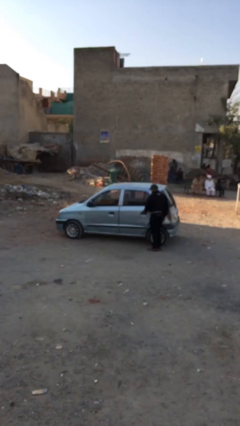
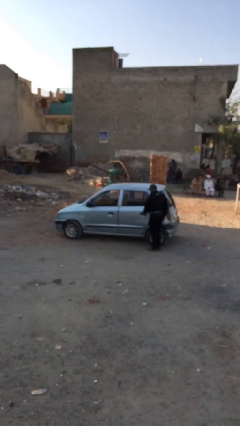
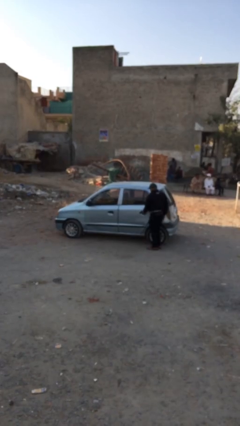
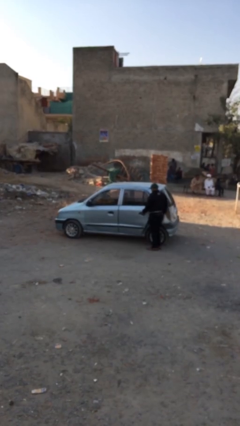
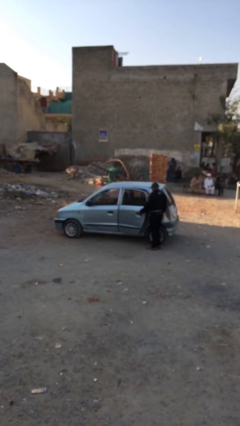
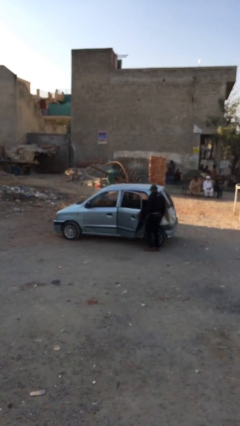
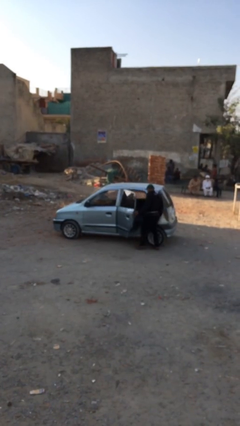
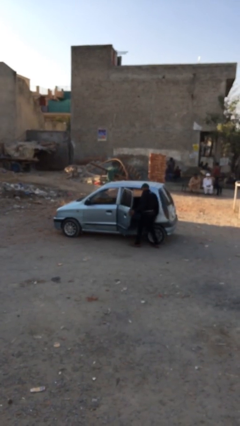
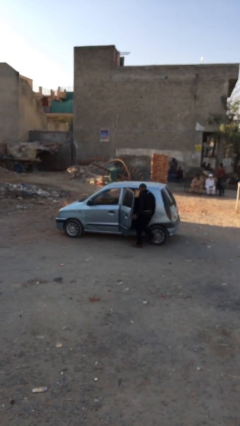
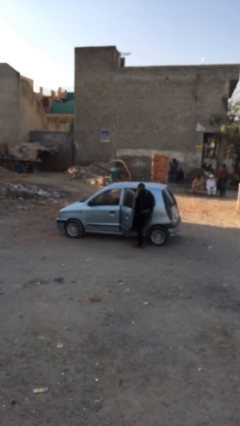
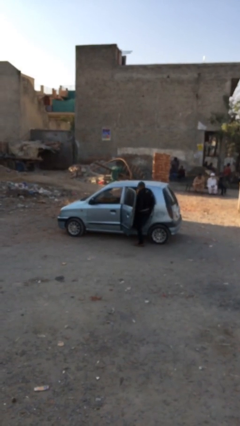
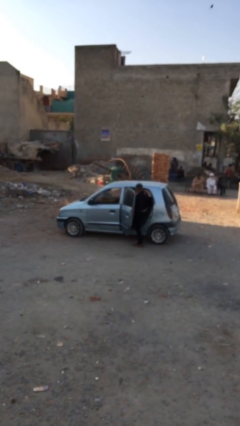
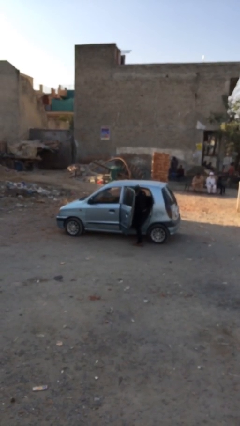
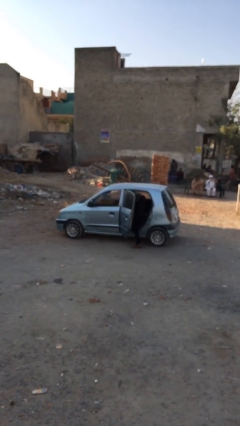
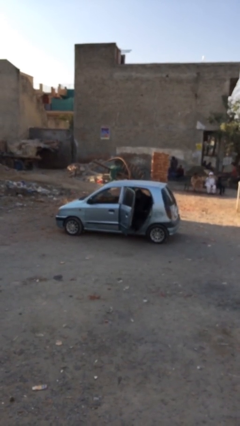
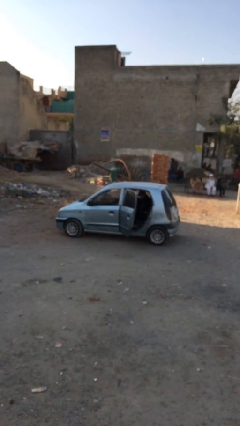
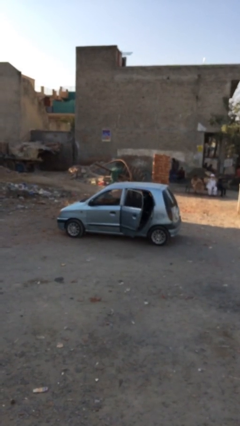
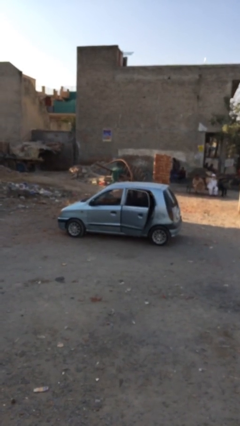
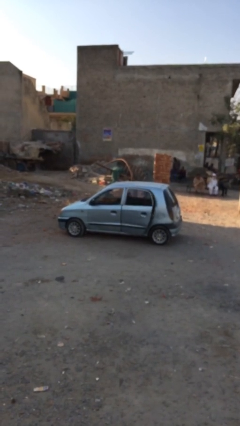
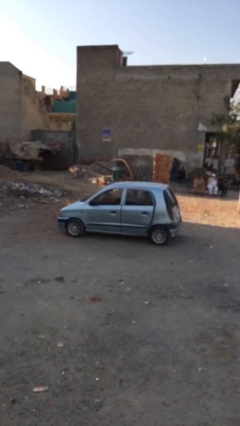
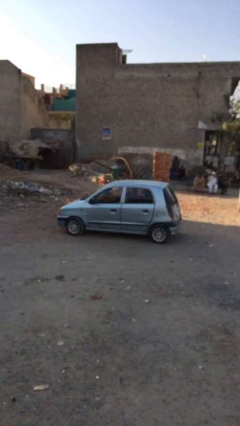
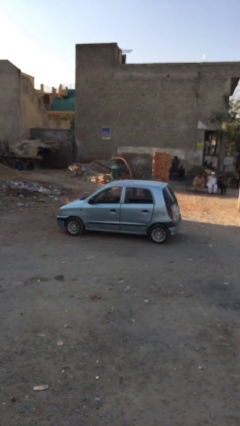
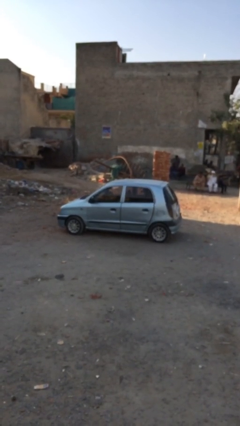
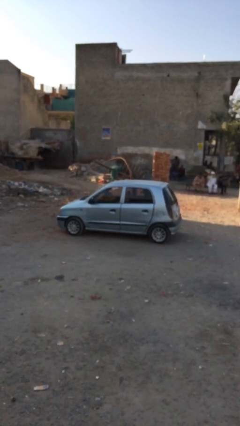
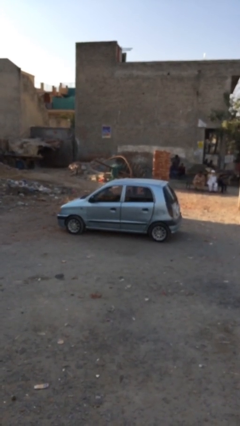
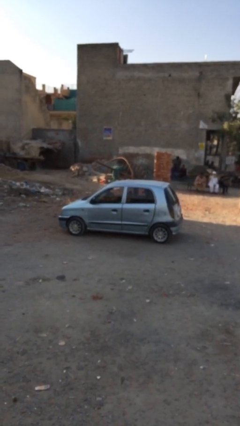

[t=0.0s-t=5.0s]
car picks up person

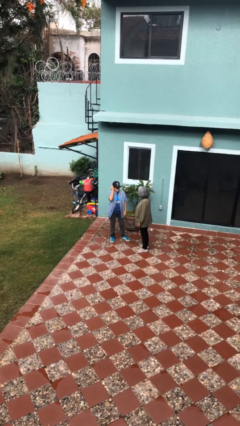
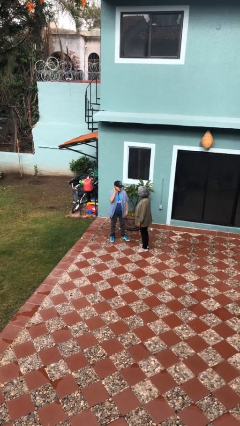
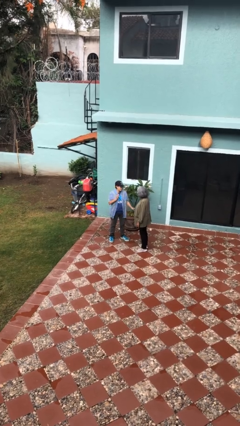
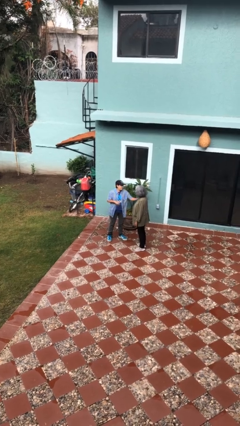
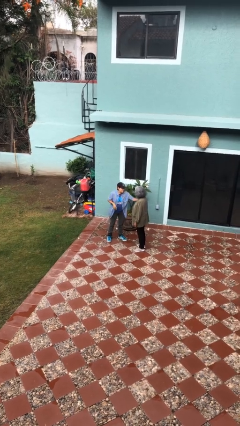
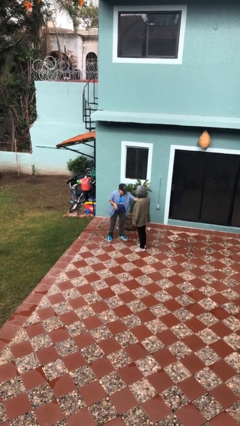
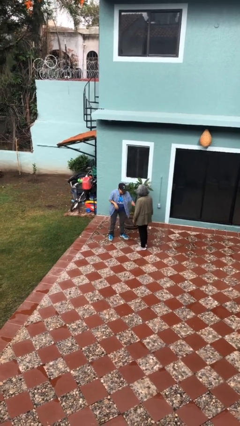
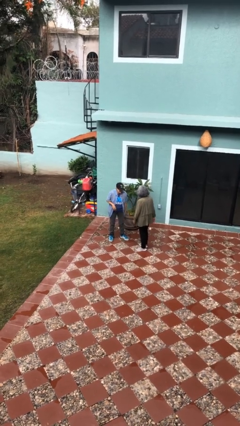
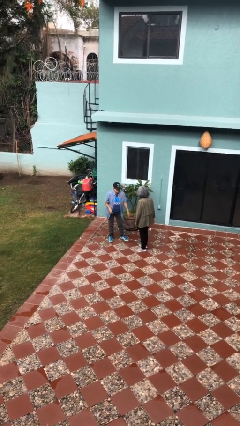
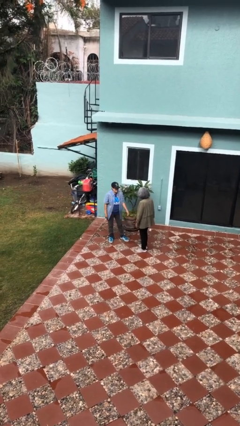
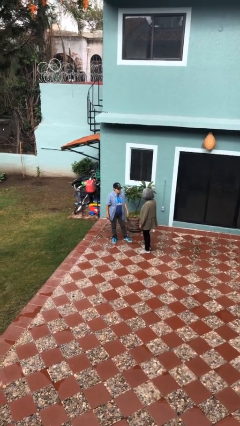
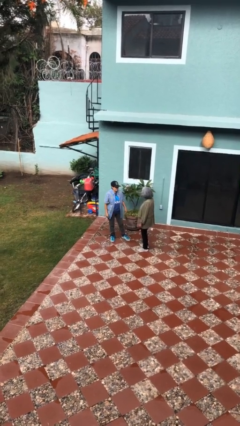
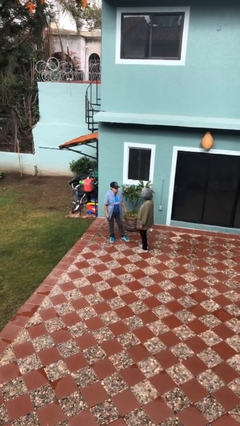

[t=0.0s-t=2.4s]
person shoves person

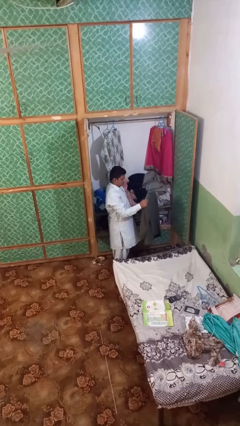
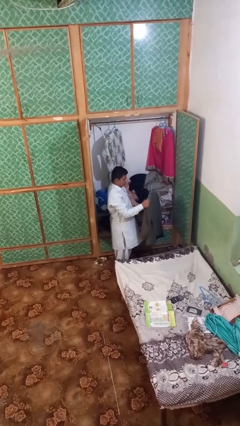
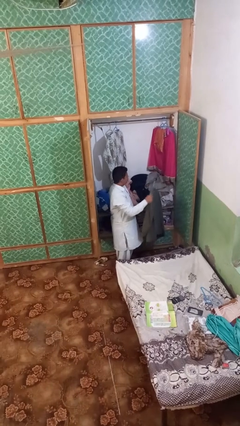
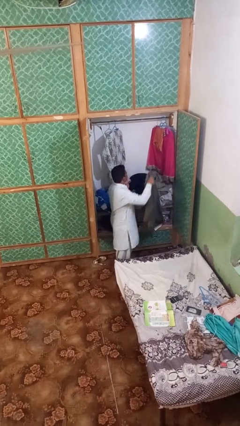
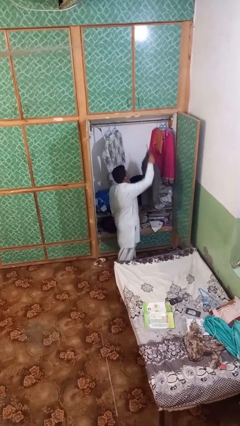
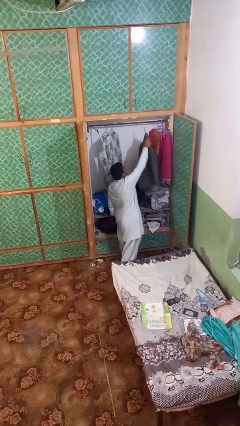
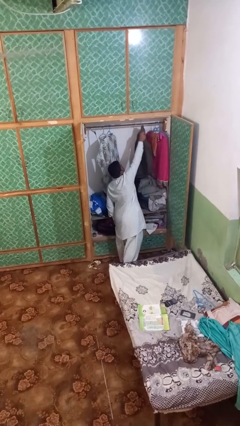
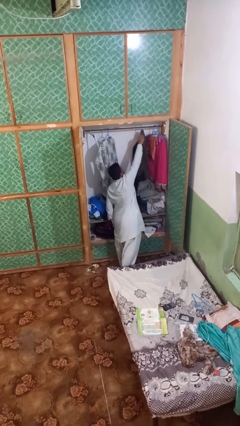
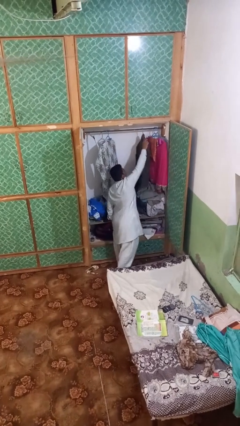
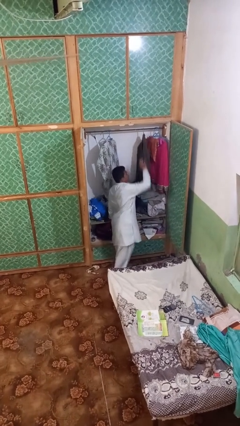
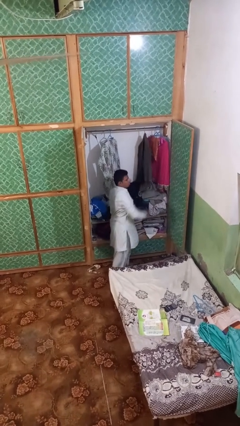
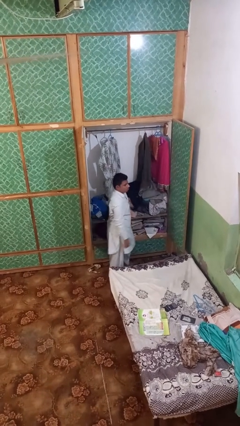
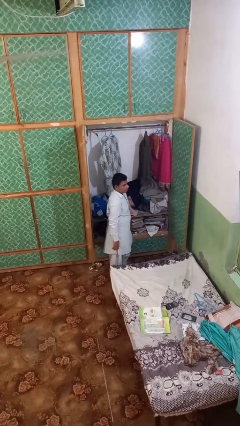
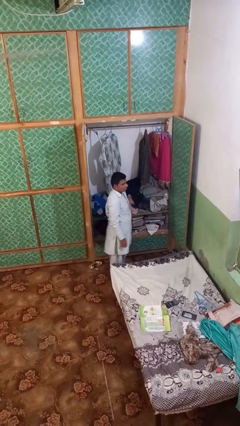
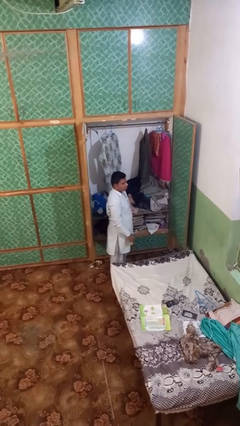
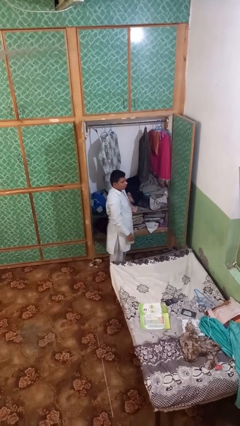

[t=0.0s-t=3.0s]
person puts clothes into closet

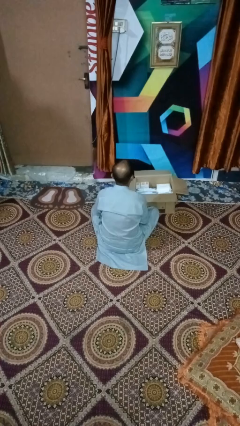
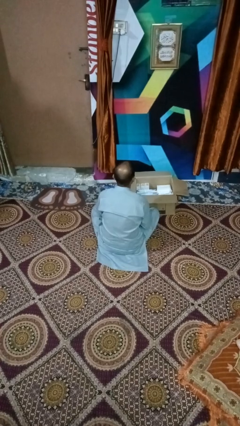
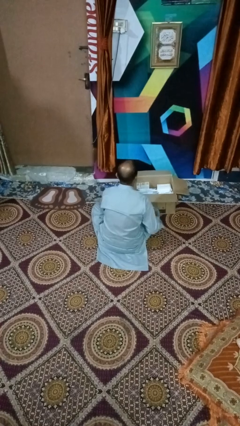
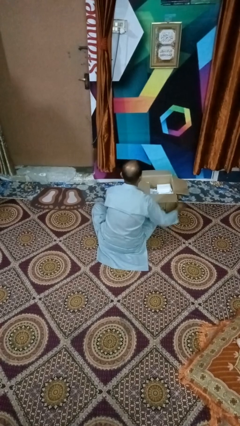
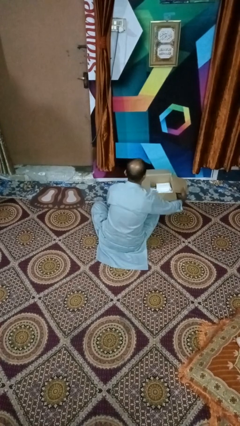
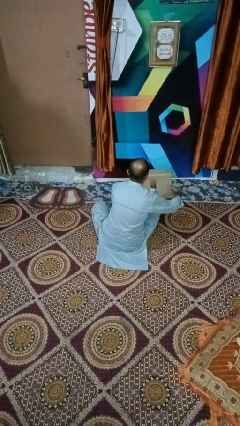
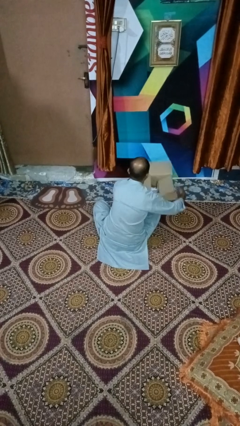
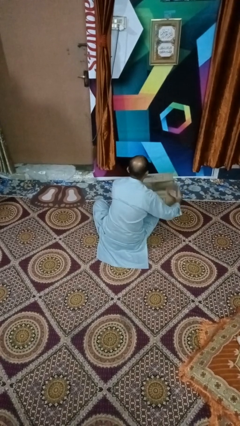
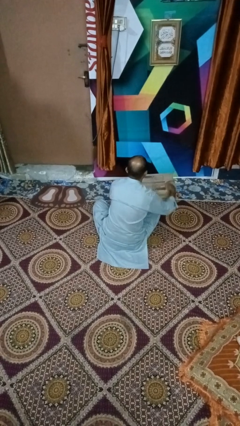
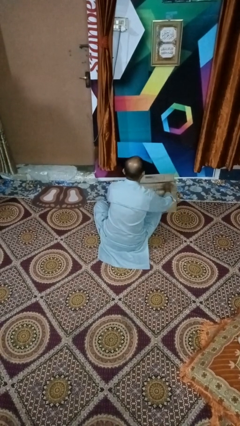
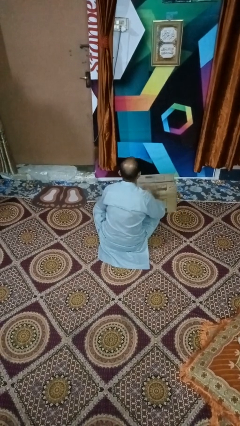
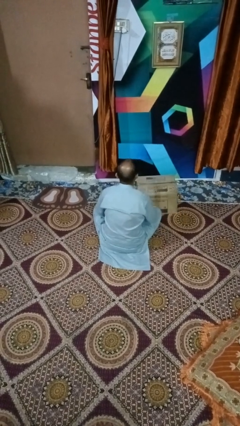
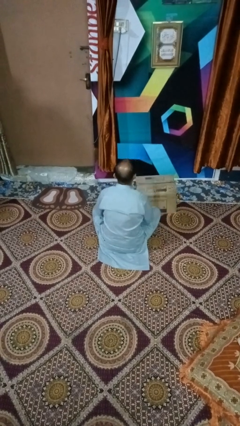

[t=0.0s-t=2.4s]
person closes box

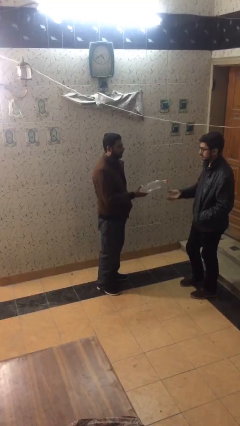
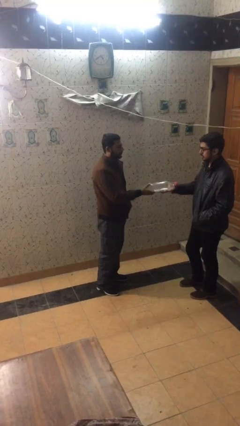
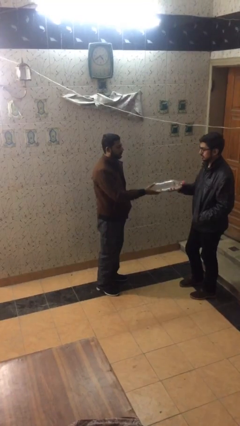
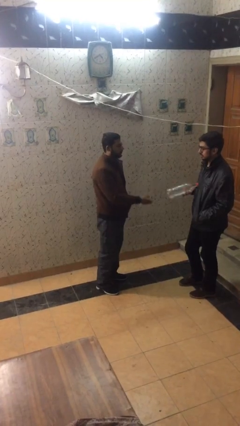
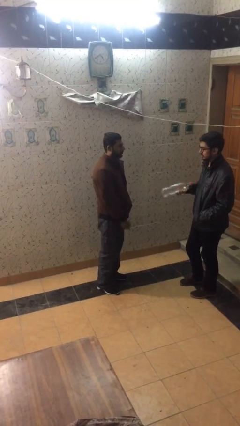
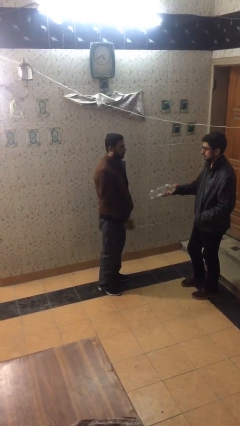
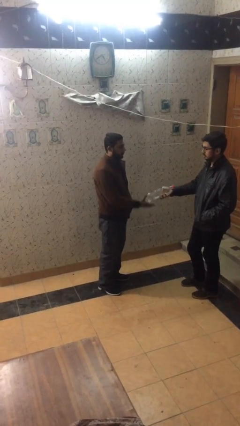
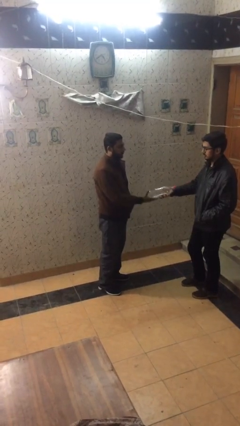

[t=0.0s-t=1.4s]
person transfers object to person

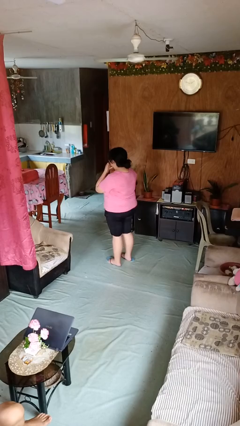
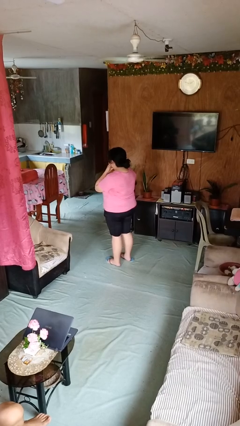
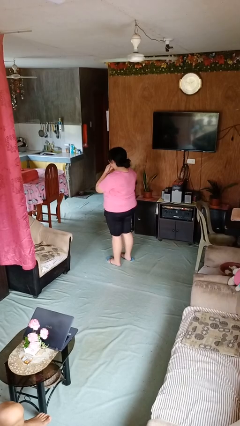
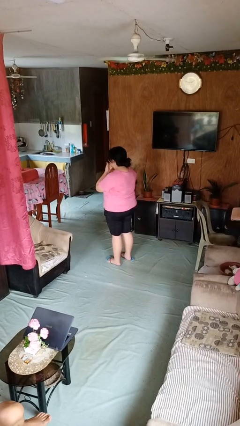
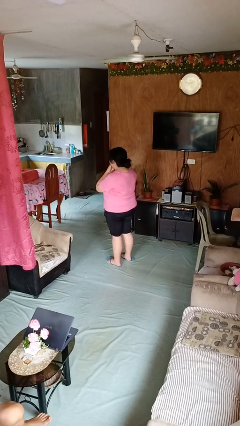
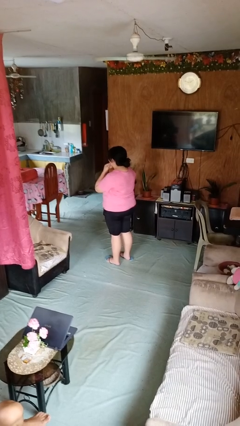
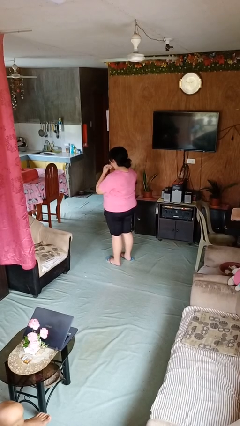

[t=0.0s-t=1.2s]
person strokes chin

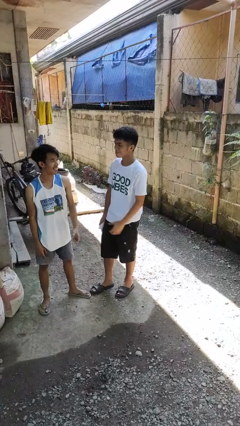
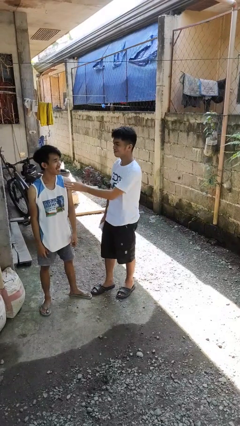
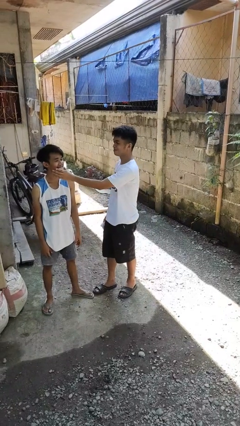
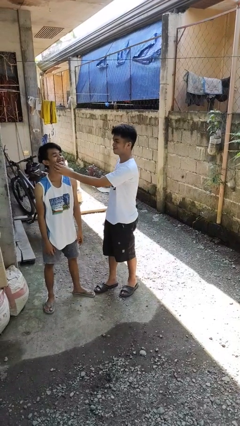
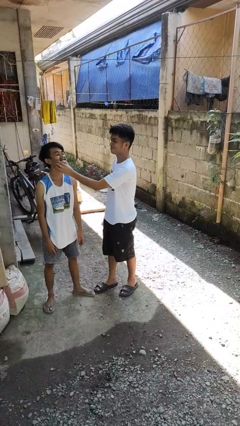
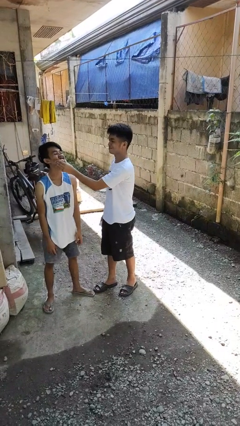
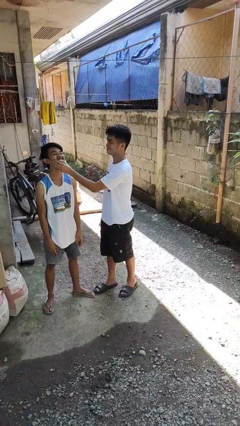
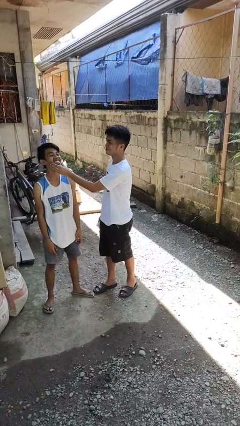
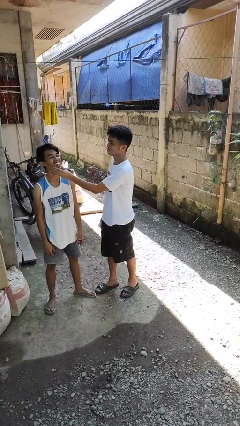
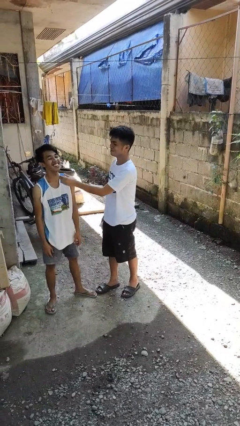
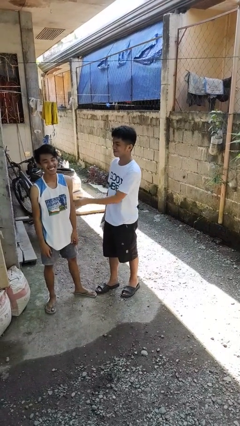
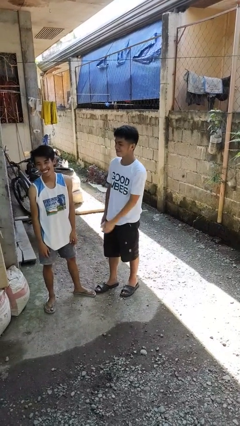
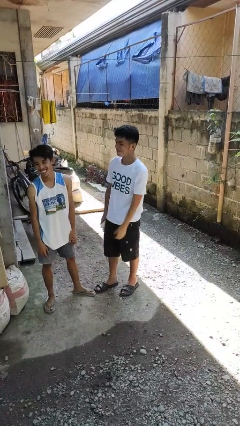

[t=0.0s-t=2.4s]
person touches face of person
